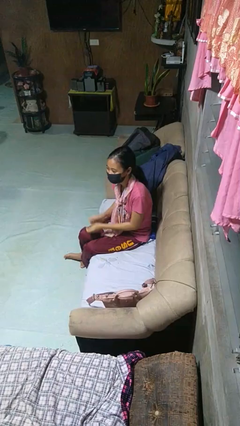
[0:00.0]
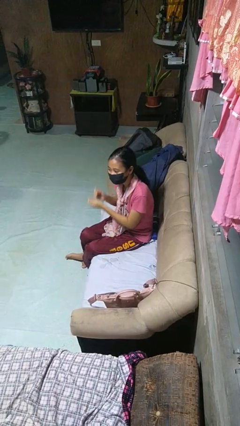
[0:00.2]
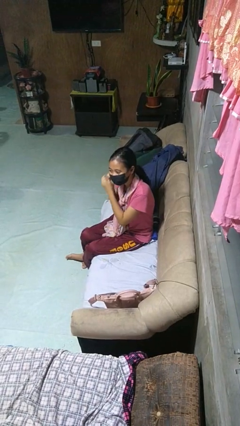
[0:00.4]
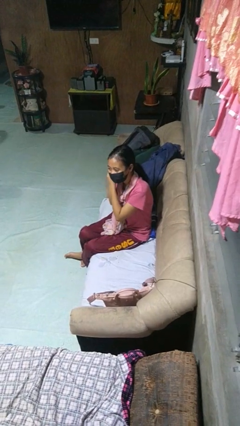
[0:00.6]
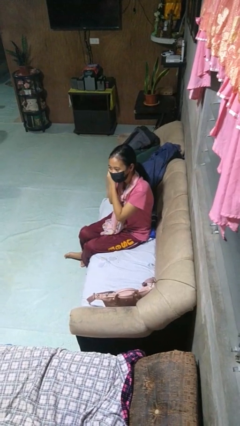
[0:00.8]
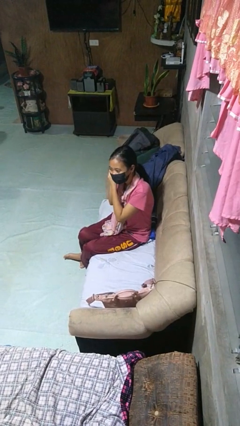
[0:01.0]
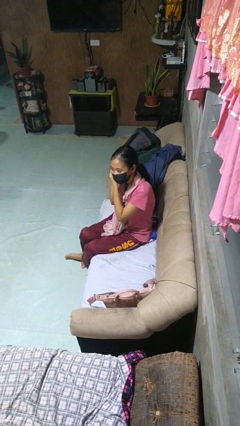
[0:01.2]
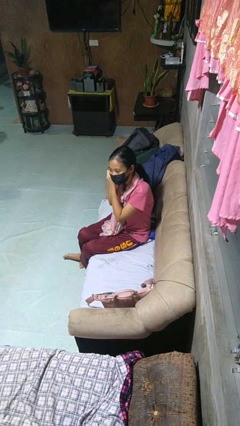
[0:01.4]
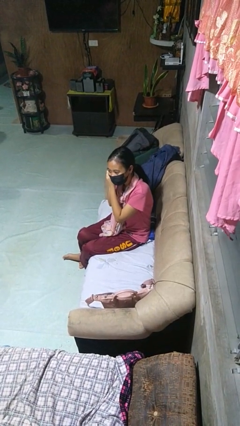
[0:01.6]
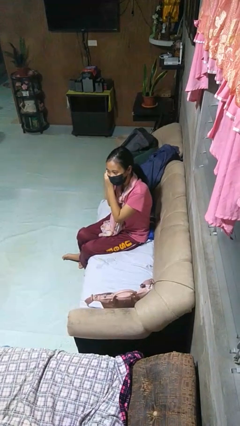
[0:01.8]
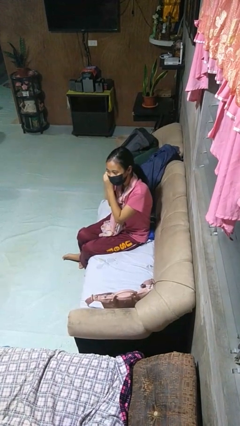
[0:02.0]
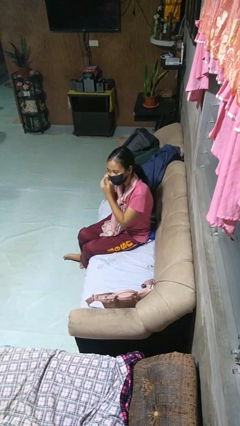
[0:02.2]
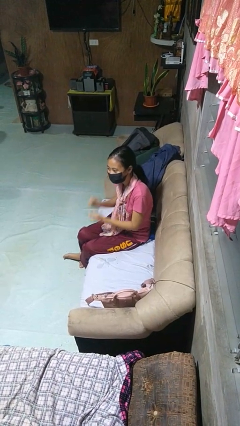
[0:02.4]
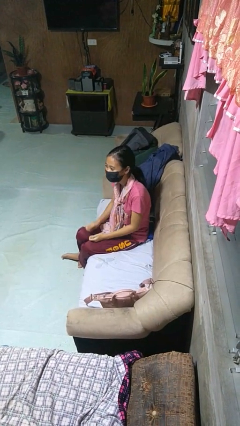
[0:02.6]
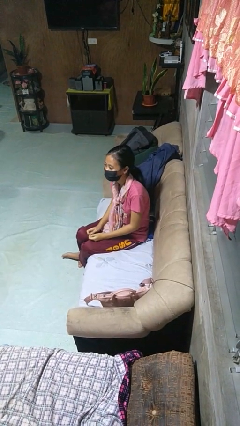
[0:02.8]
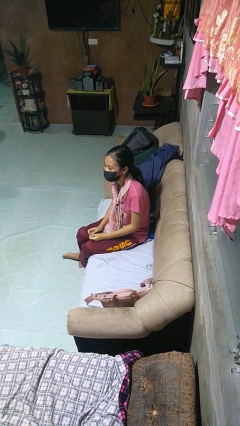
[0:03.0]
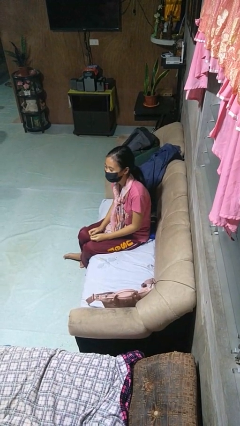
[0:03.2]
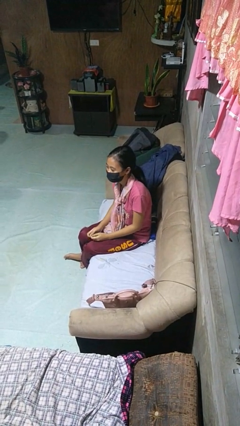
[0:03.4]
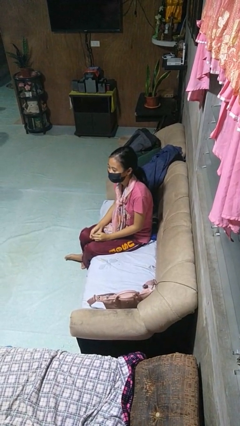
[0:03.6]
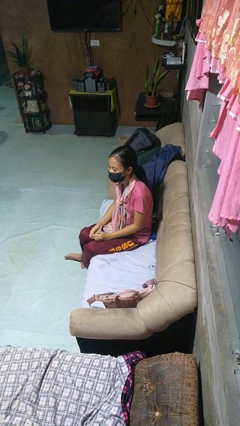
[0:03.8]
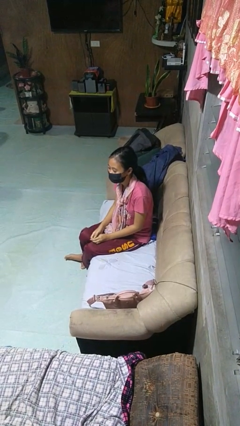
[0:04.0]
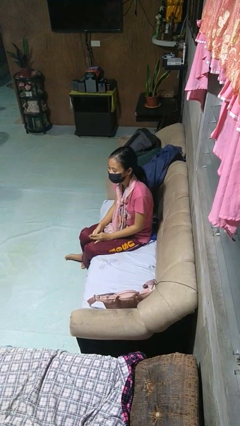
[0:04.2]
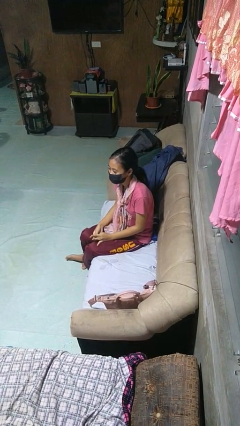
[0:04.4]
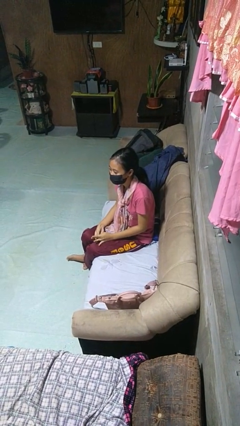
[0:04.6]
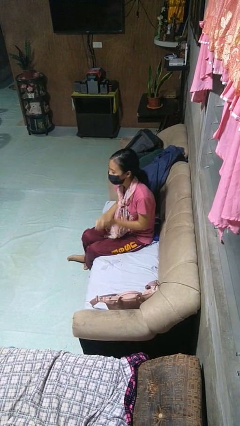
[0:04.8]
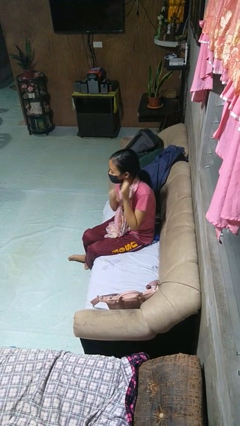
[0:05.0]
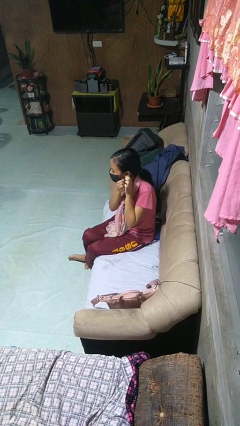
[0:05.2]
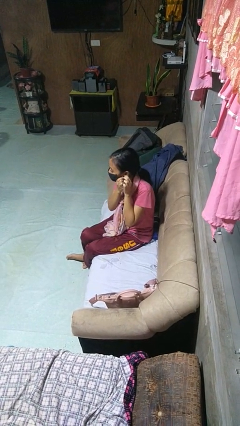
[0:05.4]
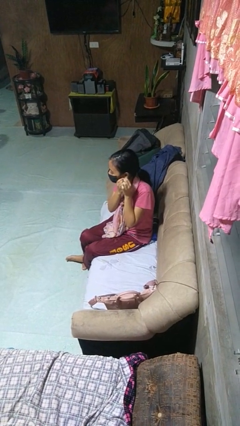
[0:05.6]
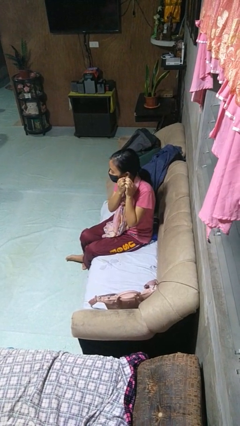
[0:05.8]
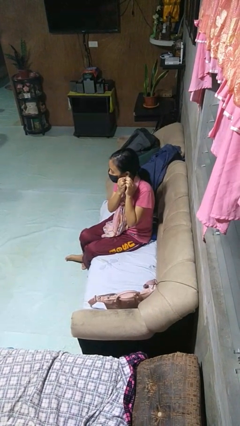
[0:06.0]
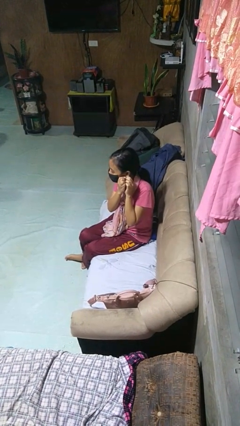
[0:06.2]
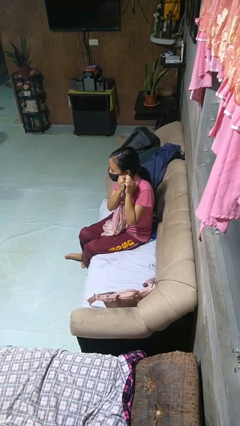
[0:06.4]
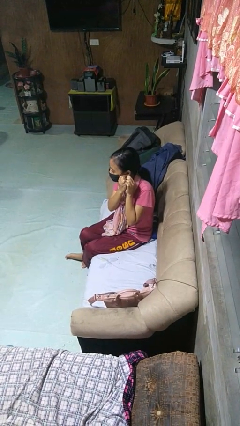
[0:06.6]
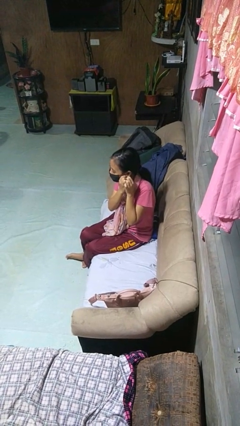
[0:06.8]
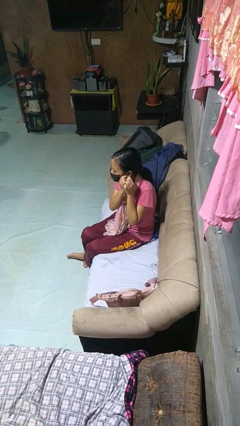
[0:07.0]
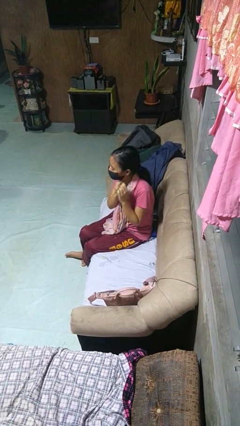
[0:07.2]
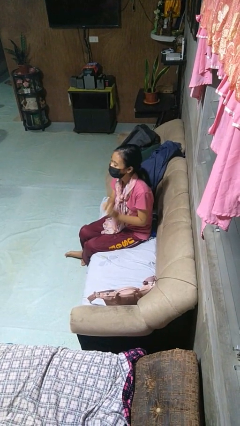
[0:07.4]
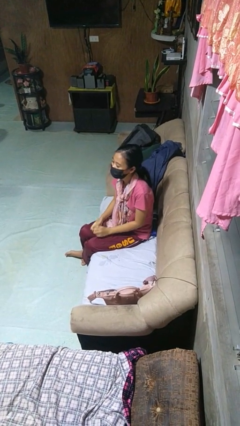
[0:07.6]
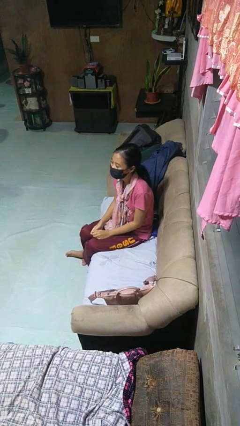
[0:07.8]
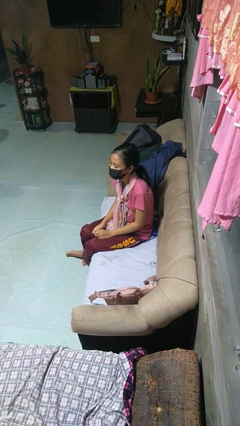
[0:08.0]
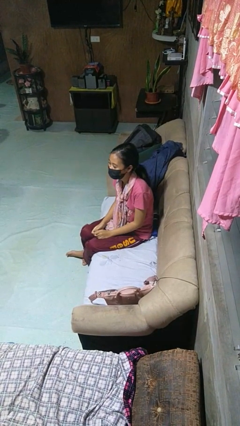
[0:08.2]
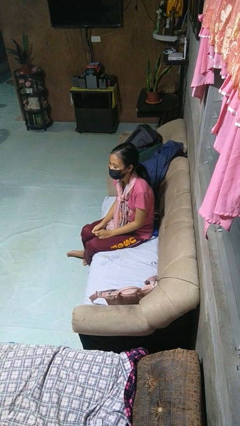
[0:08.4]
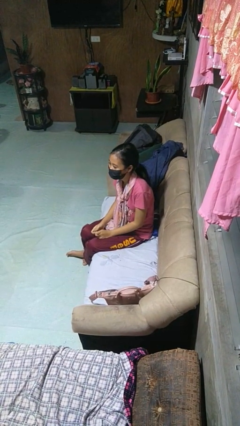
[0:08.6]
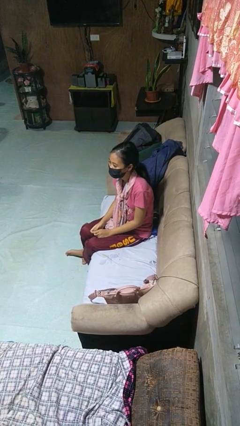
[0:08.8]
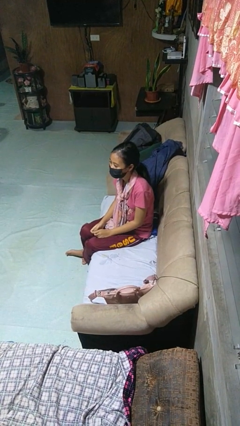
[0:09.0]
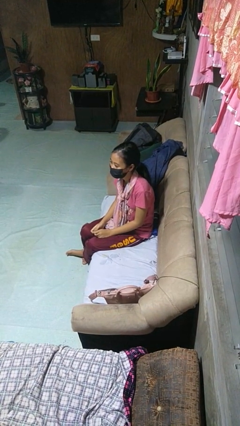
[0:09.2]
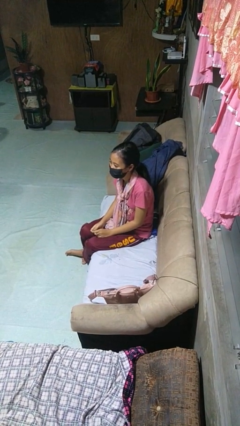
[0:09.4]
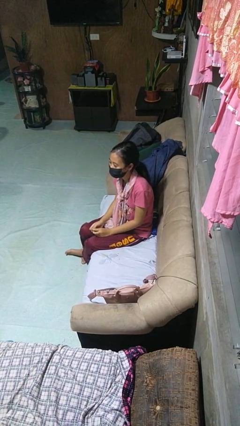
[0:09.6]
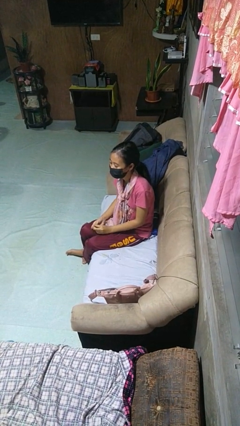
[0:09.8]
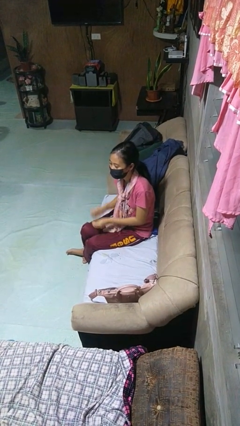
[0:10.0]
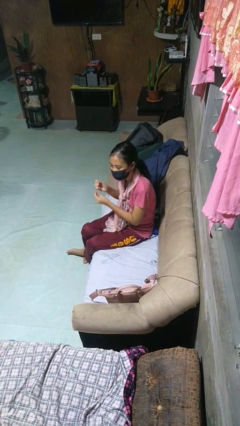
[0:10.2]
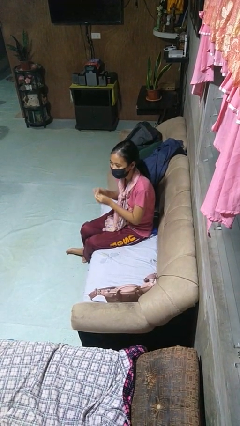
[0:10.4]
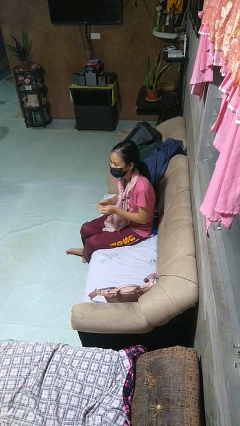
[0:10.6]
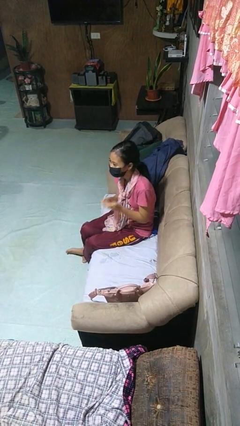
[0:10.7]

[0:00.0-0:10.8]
person takes off earrings

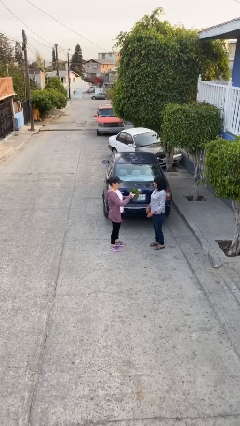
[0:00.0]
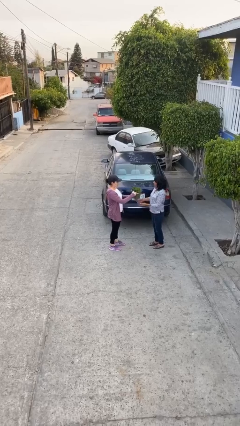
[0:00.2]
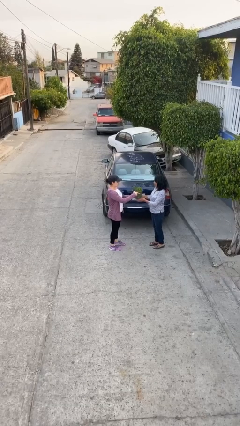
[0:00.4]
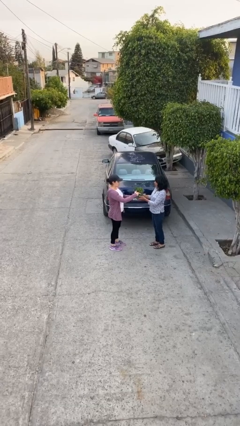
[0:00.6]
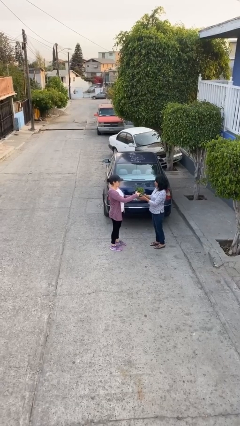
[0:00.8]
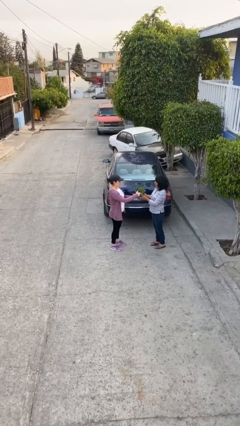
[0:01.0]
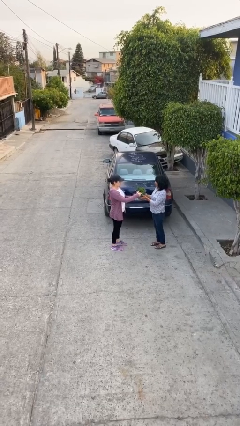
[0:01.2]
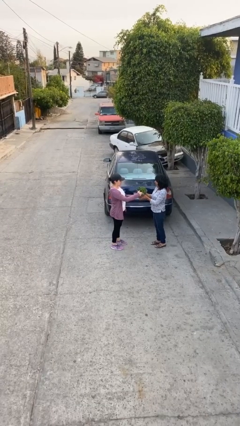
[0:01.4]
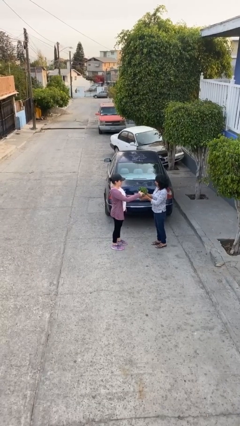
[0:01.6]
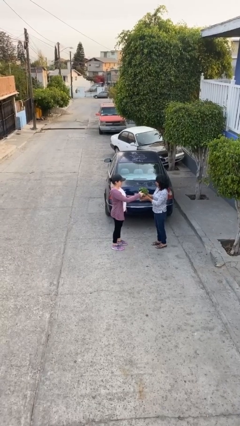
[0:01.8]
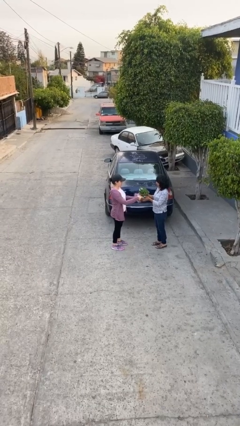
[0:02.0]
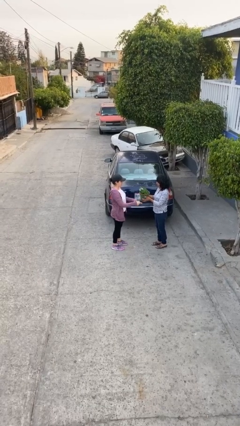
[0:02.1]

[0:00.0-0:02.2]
person transfers object to person

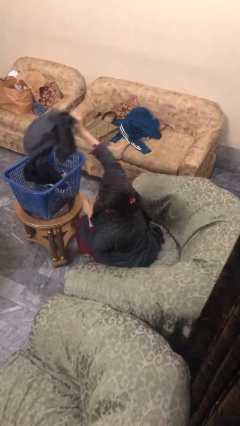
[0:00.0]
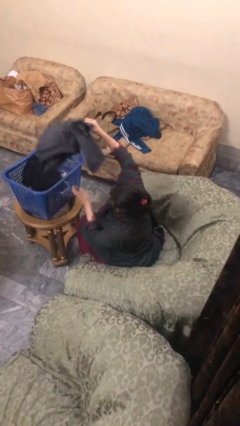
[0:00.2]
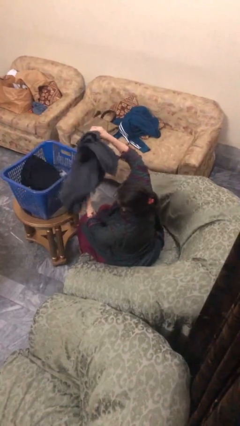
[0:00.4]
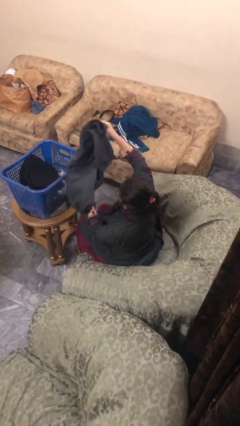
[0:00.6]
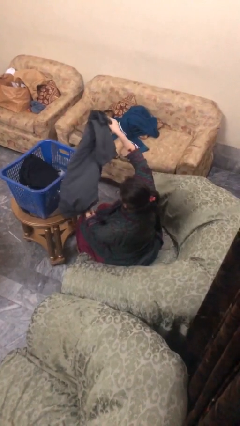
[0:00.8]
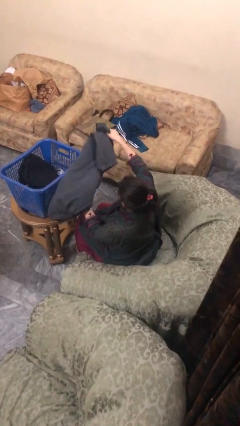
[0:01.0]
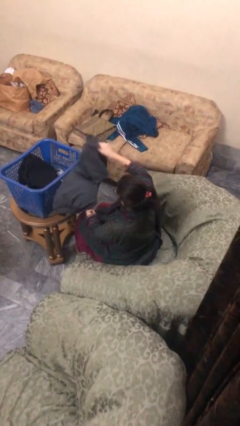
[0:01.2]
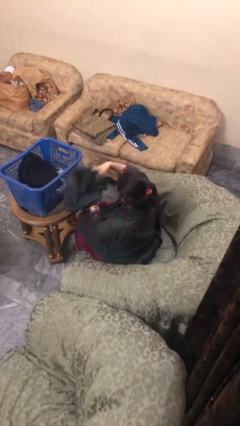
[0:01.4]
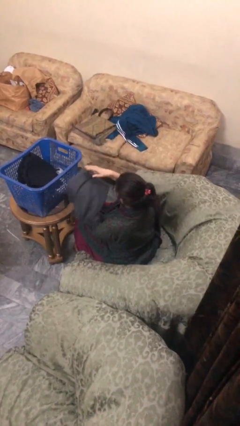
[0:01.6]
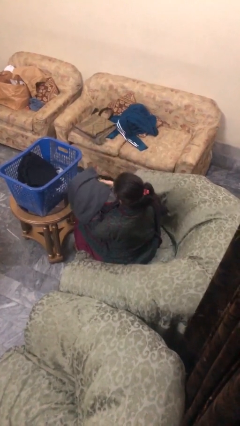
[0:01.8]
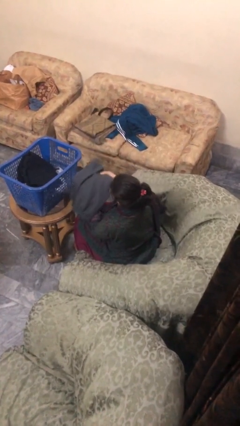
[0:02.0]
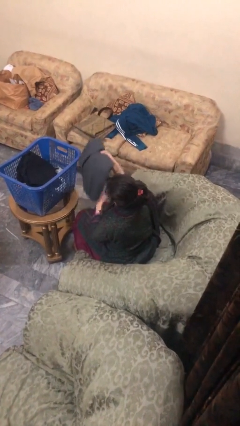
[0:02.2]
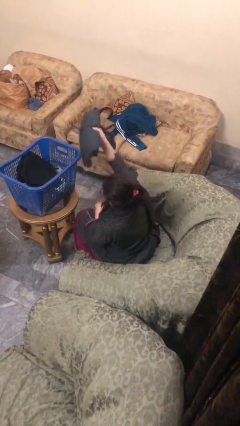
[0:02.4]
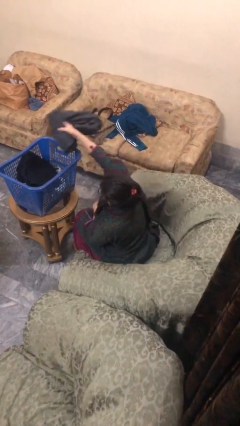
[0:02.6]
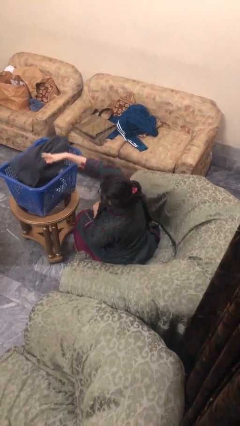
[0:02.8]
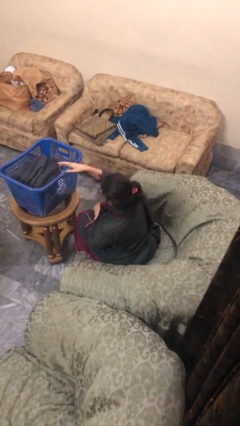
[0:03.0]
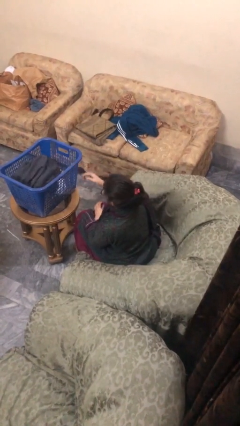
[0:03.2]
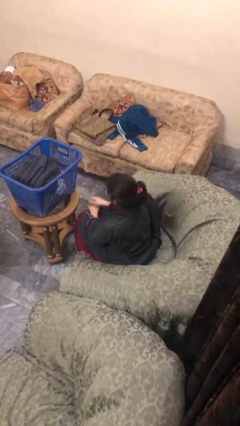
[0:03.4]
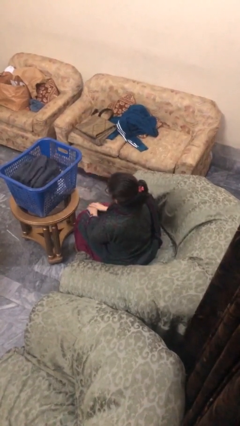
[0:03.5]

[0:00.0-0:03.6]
person folds pants

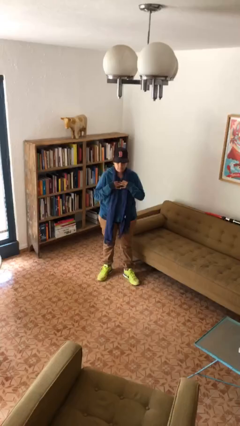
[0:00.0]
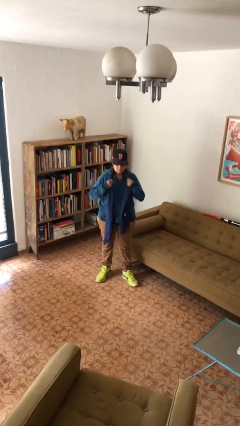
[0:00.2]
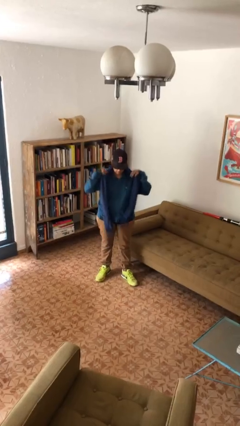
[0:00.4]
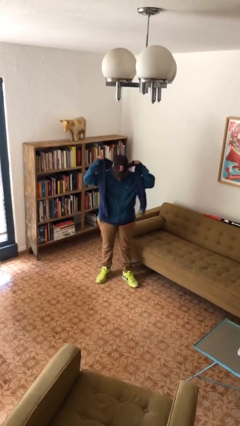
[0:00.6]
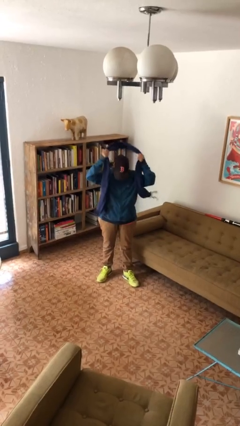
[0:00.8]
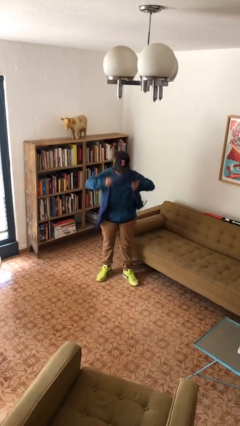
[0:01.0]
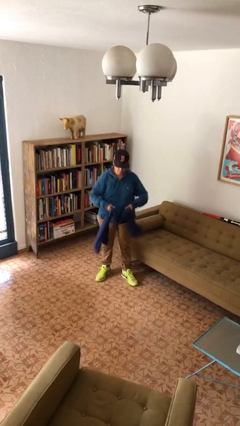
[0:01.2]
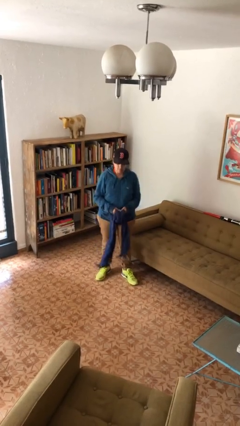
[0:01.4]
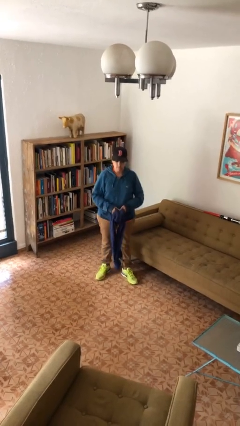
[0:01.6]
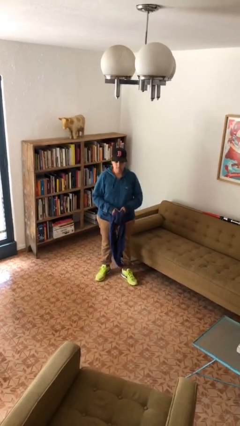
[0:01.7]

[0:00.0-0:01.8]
person takes off scarf
